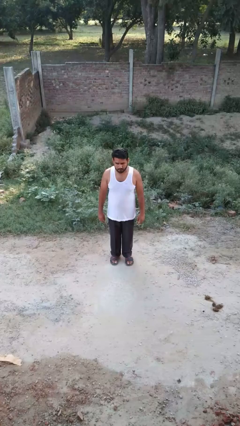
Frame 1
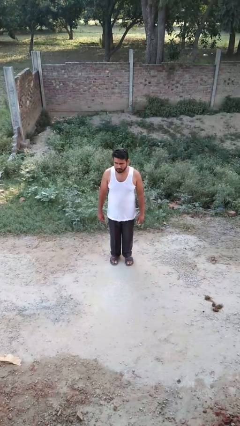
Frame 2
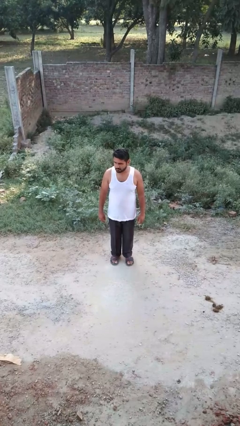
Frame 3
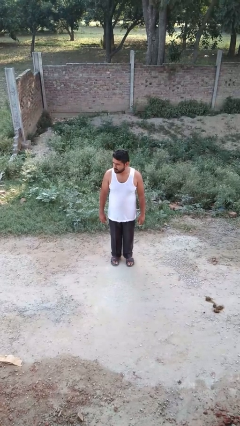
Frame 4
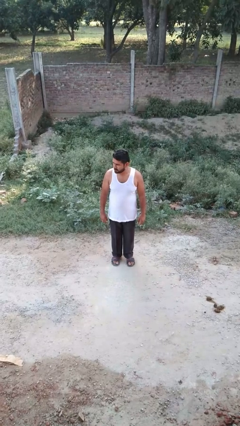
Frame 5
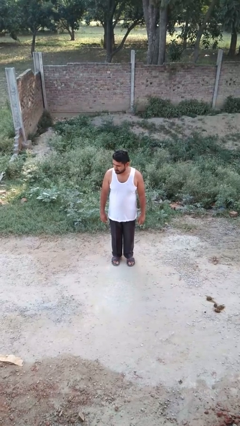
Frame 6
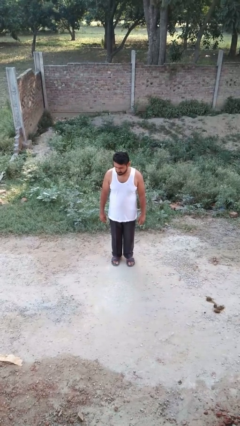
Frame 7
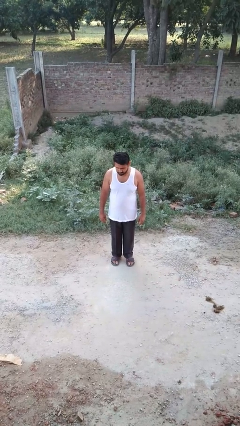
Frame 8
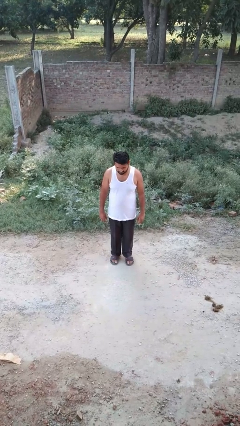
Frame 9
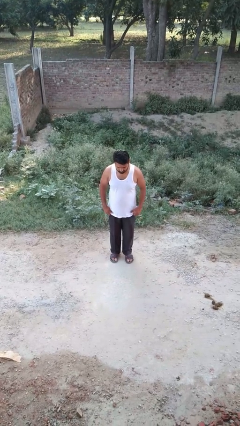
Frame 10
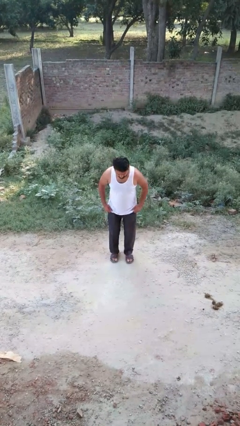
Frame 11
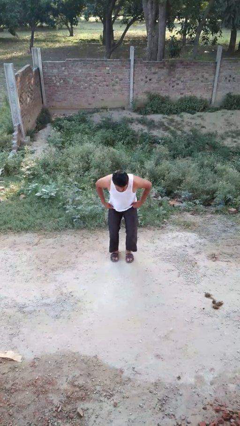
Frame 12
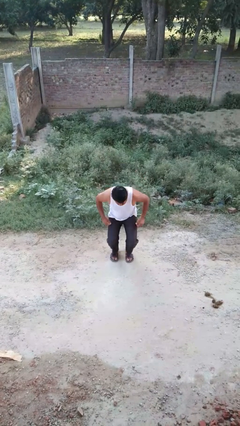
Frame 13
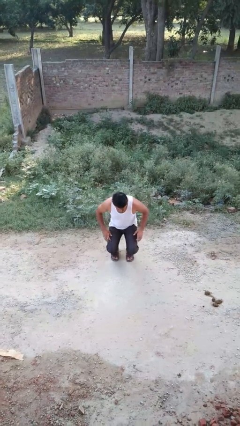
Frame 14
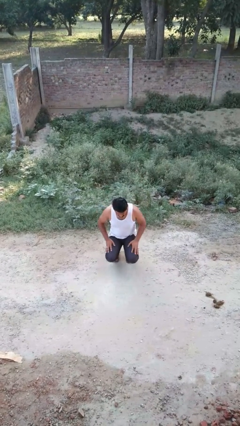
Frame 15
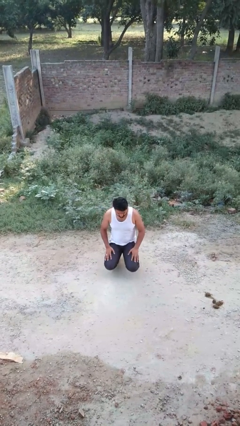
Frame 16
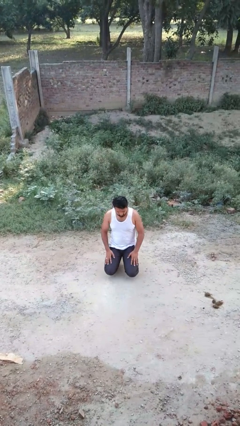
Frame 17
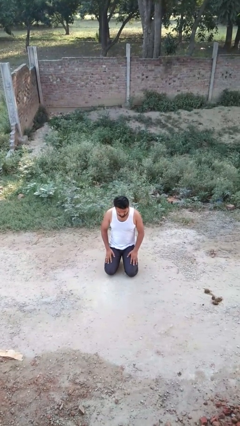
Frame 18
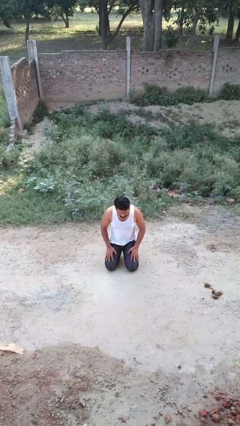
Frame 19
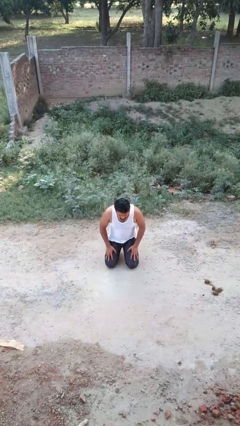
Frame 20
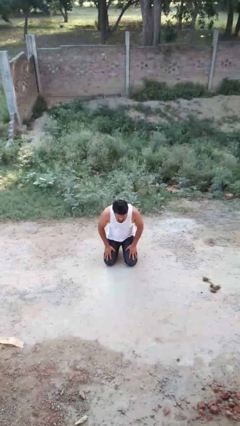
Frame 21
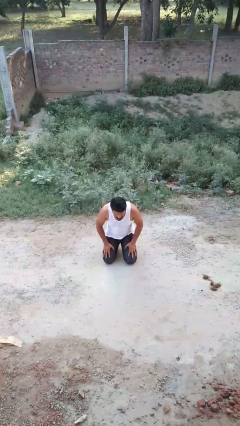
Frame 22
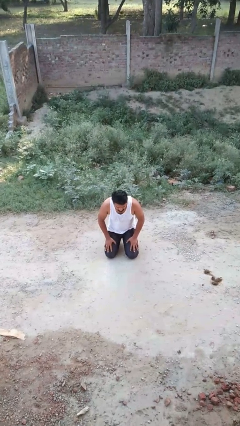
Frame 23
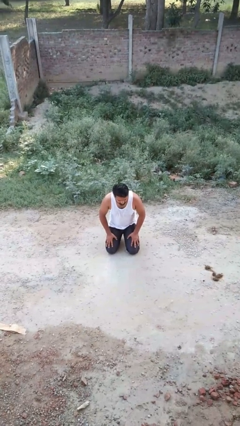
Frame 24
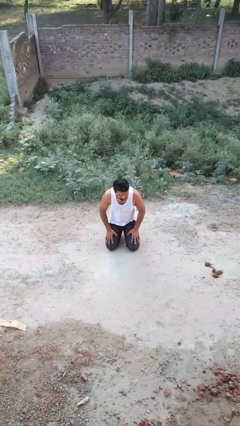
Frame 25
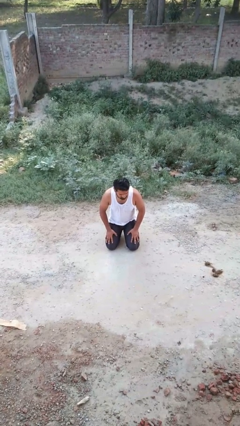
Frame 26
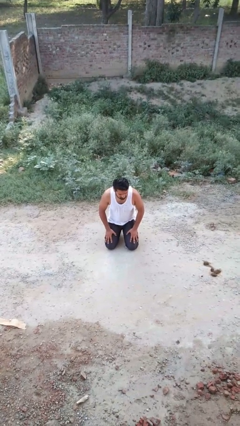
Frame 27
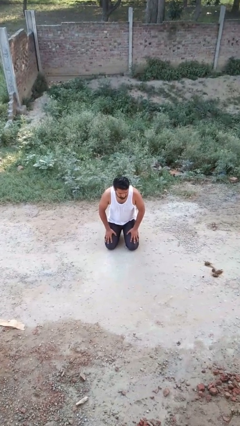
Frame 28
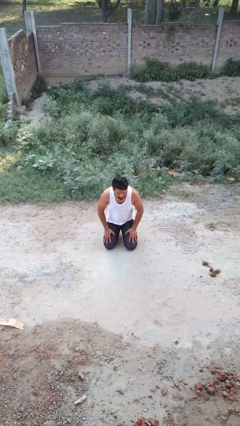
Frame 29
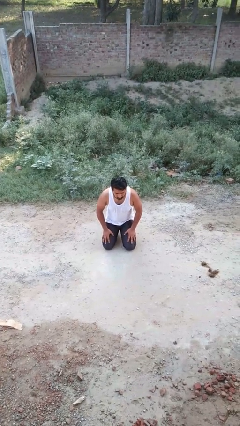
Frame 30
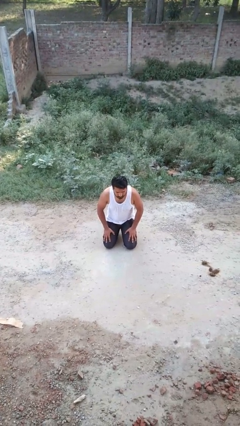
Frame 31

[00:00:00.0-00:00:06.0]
person kneels

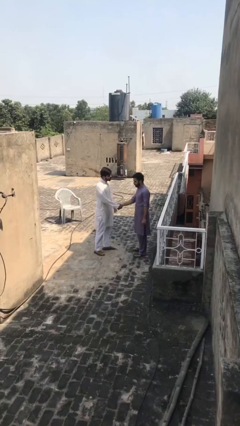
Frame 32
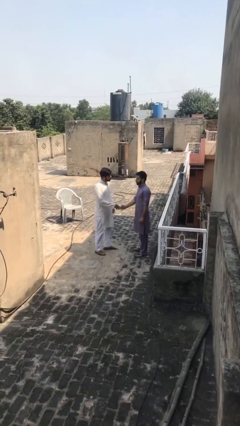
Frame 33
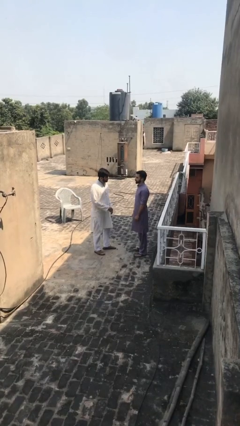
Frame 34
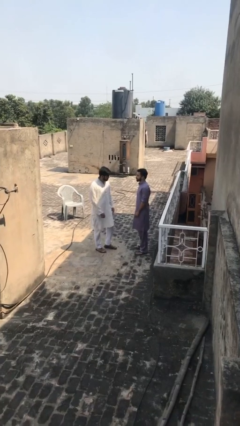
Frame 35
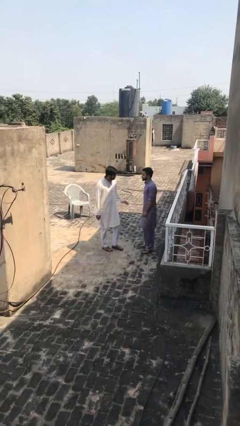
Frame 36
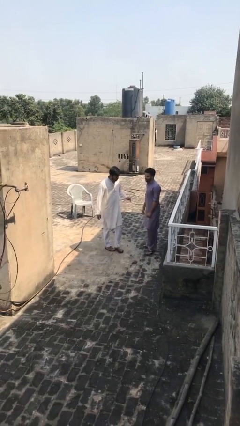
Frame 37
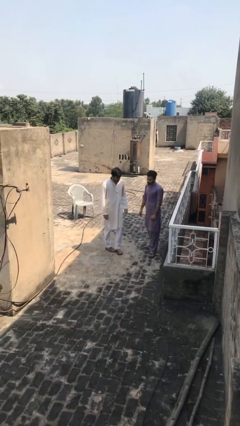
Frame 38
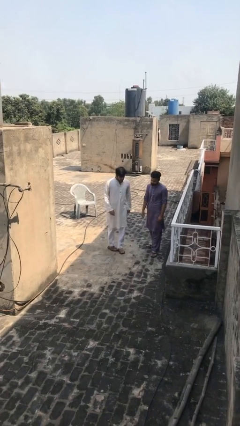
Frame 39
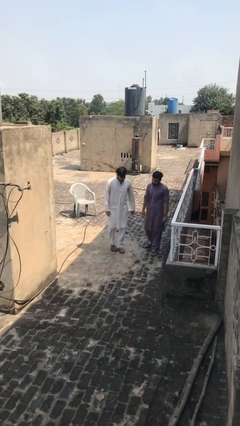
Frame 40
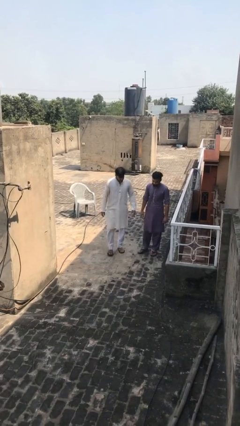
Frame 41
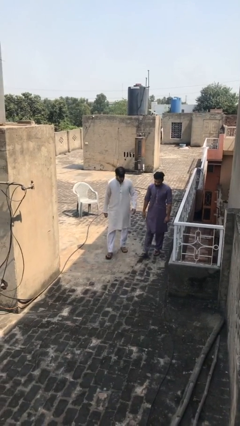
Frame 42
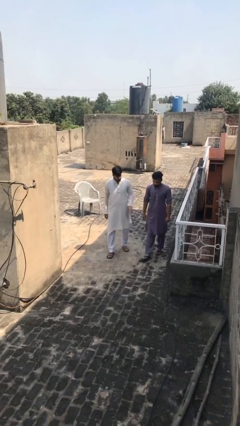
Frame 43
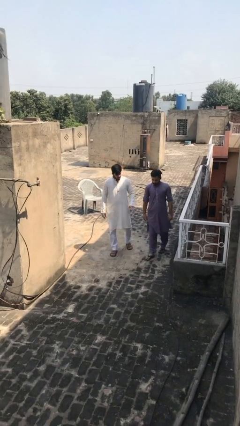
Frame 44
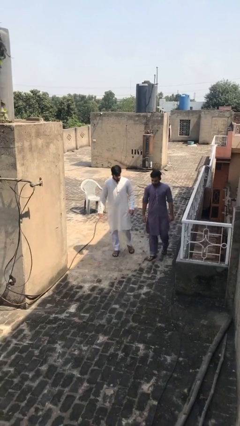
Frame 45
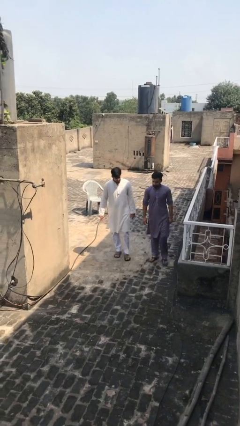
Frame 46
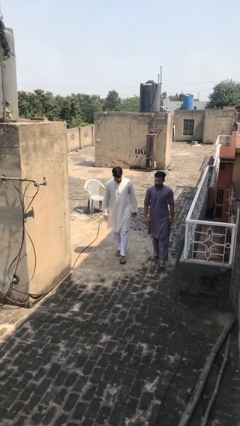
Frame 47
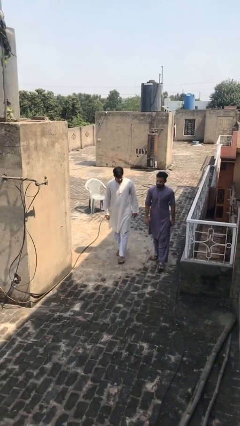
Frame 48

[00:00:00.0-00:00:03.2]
person talks to person

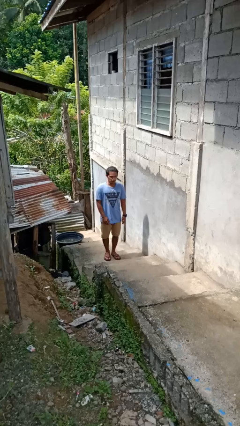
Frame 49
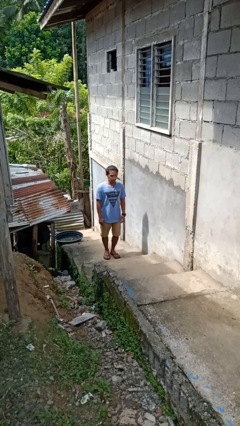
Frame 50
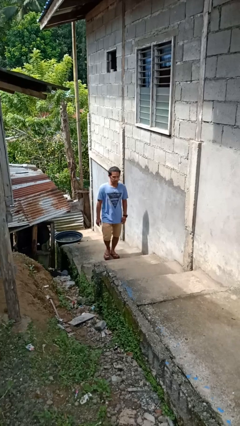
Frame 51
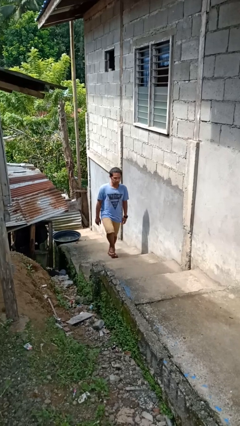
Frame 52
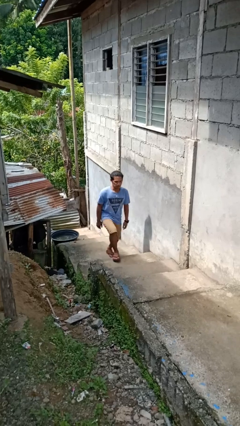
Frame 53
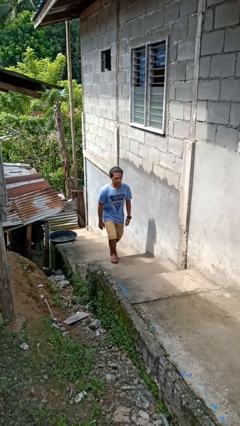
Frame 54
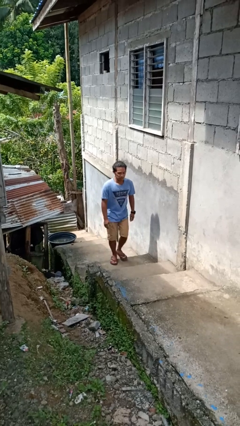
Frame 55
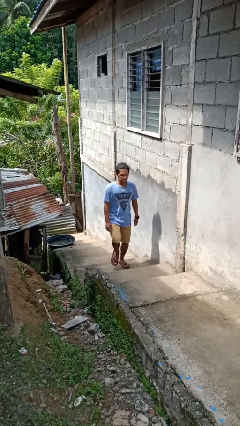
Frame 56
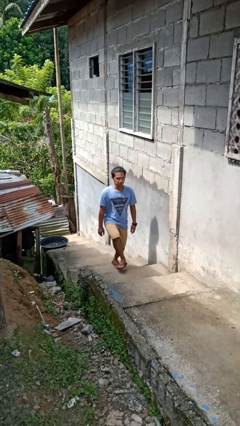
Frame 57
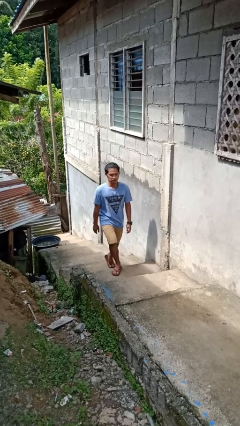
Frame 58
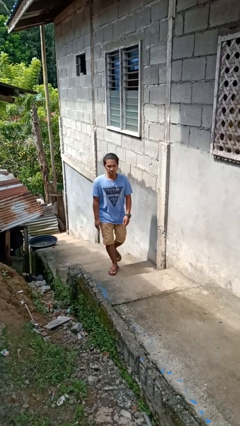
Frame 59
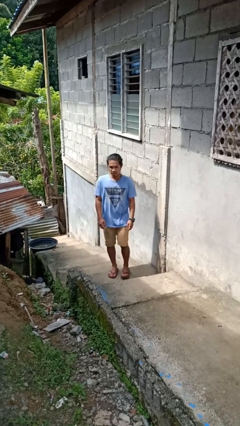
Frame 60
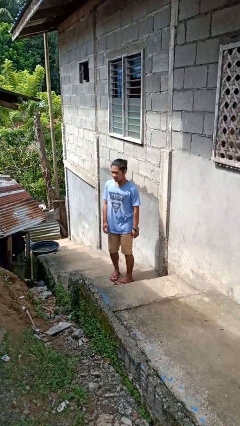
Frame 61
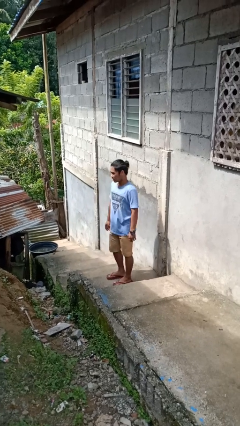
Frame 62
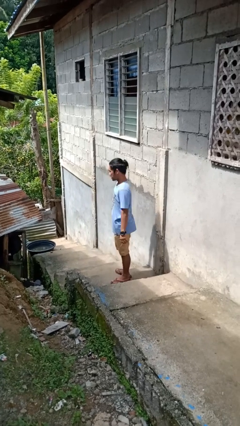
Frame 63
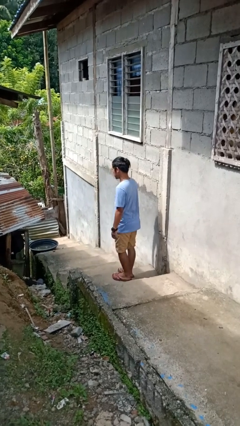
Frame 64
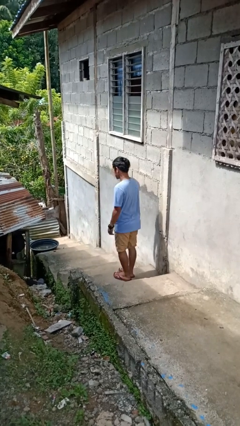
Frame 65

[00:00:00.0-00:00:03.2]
person climbs up stairs

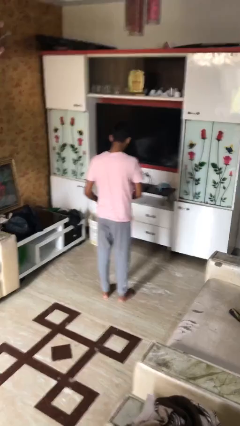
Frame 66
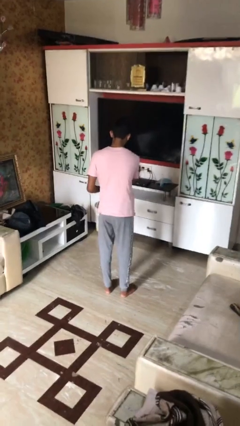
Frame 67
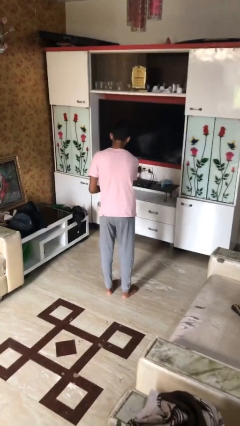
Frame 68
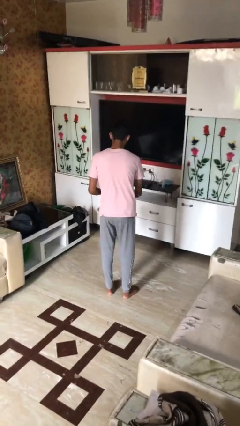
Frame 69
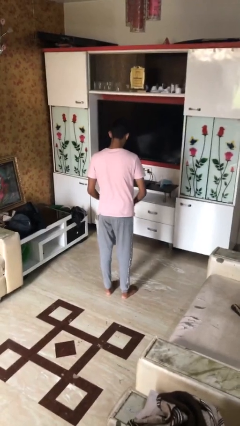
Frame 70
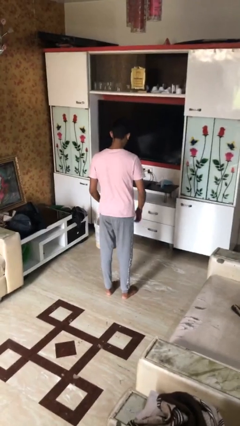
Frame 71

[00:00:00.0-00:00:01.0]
person puts object into basket

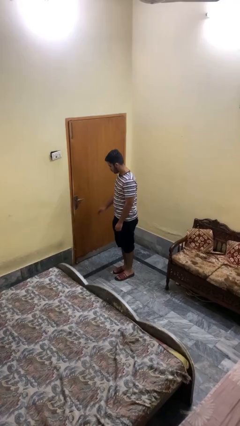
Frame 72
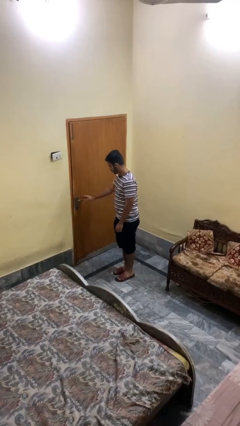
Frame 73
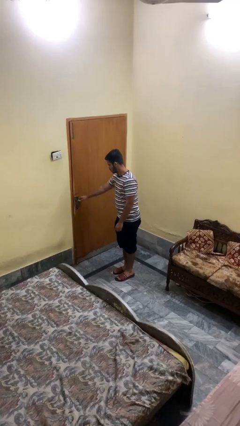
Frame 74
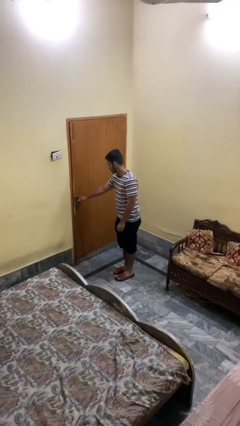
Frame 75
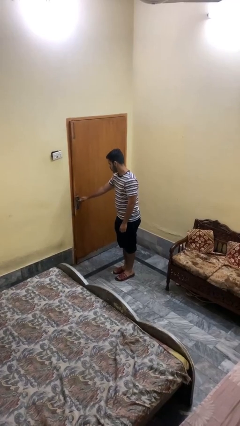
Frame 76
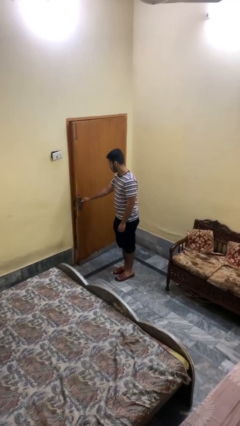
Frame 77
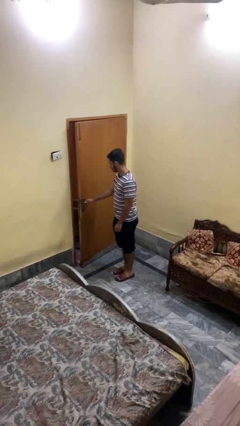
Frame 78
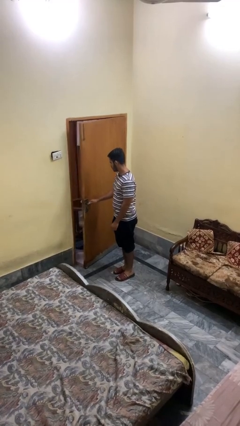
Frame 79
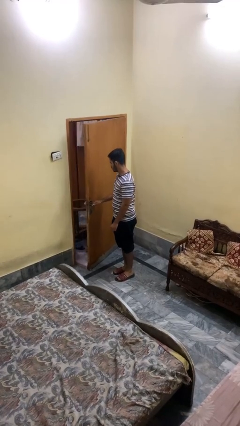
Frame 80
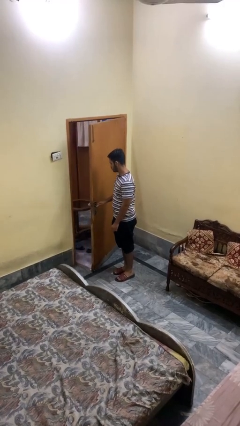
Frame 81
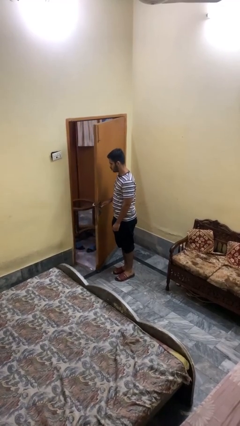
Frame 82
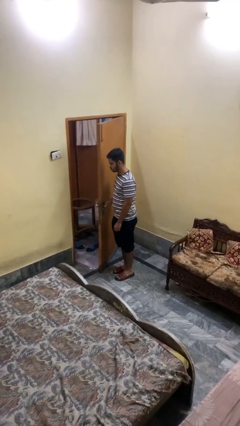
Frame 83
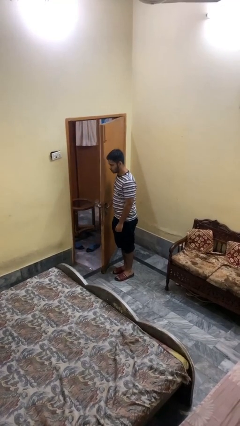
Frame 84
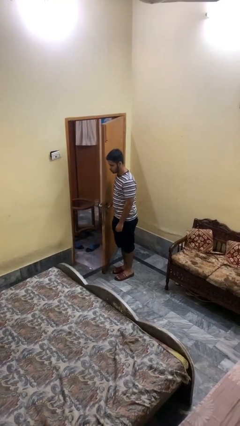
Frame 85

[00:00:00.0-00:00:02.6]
person opens facility door

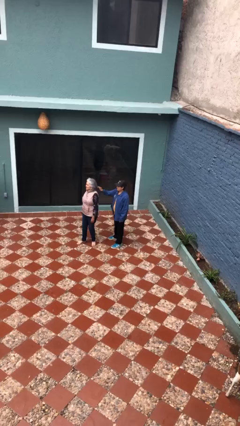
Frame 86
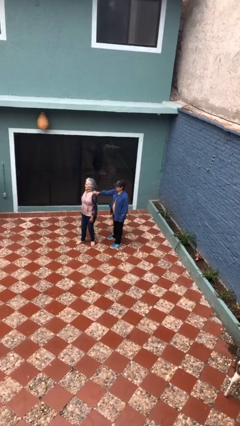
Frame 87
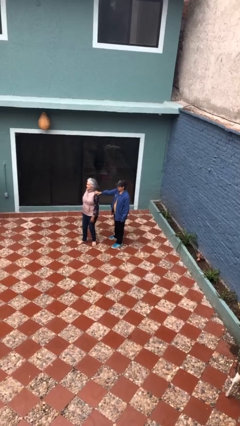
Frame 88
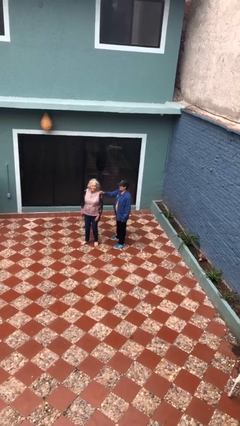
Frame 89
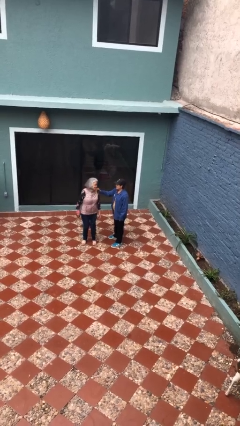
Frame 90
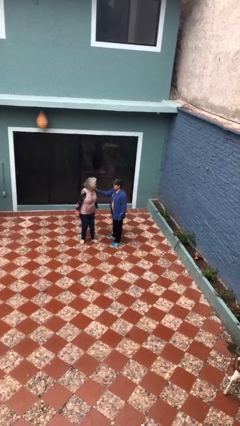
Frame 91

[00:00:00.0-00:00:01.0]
person grabs person by shoulder

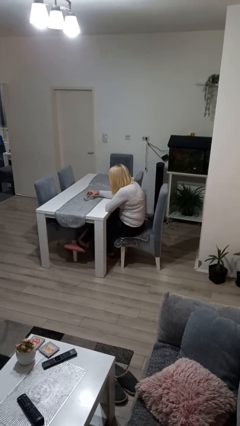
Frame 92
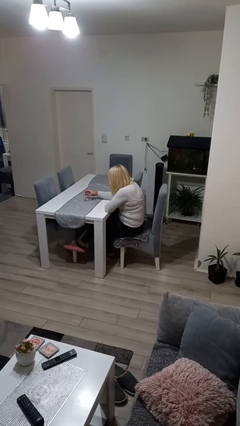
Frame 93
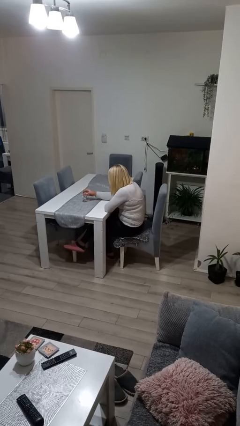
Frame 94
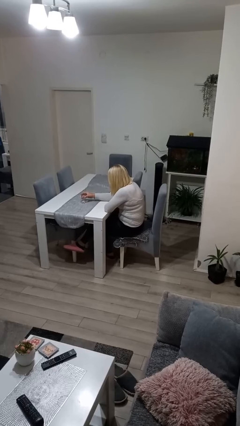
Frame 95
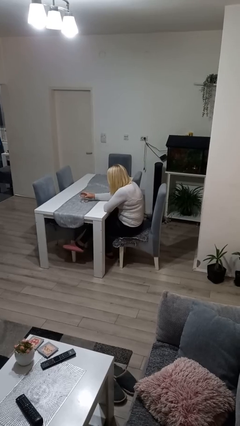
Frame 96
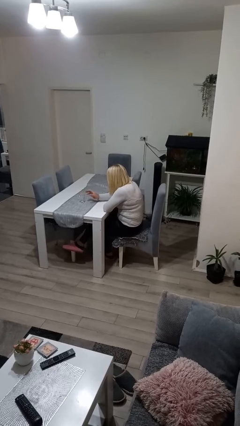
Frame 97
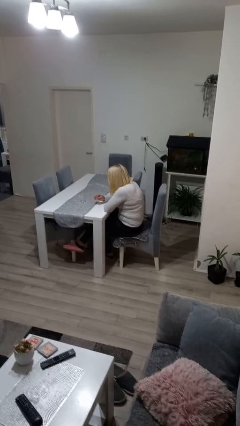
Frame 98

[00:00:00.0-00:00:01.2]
person sets upright glass
